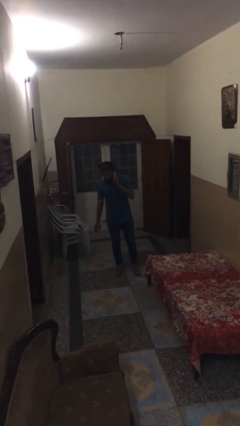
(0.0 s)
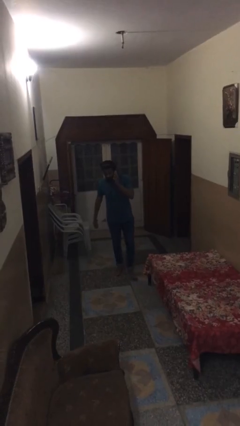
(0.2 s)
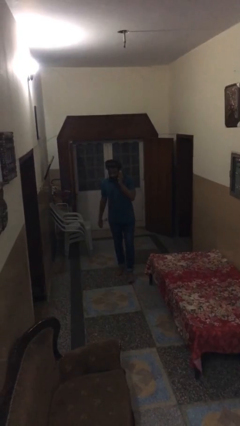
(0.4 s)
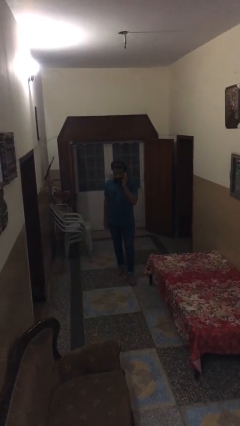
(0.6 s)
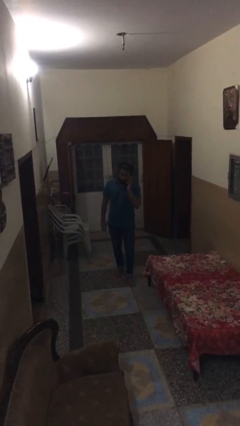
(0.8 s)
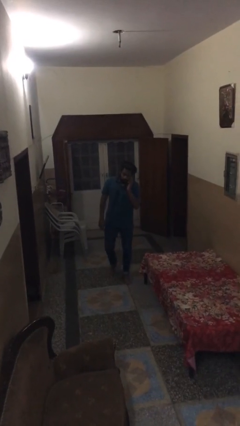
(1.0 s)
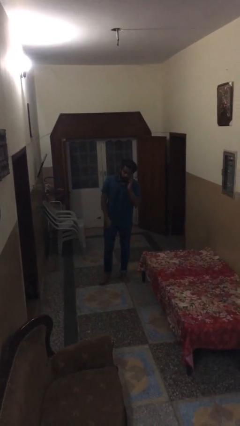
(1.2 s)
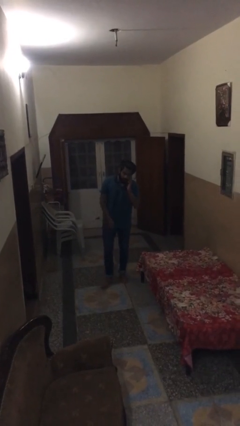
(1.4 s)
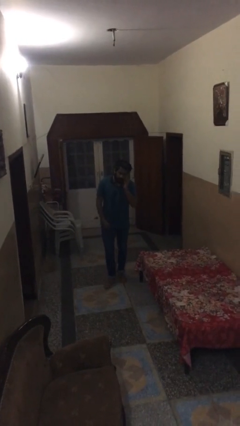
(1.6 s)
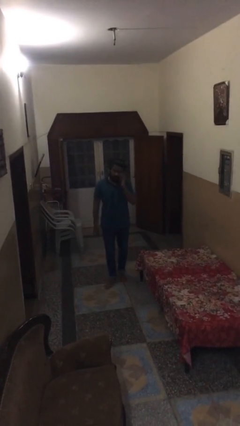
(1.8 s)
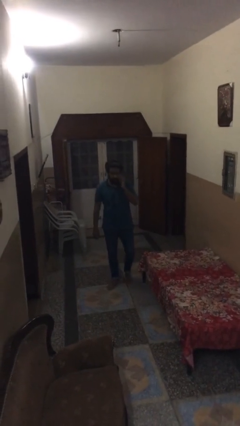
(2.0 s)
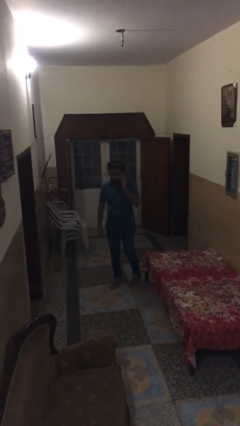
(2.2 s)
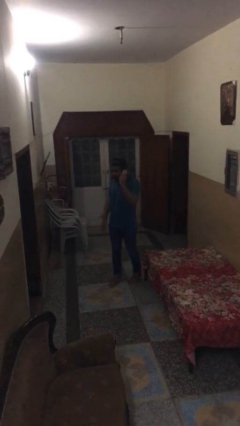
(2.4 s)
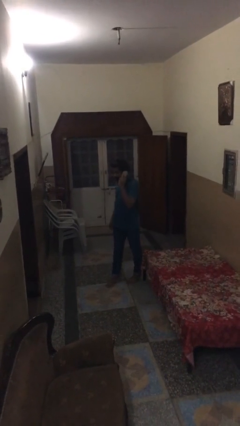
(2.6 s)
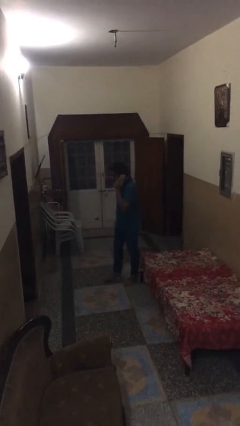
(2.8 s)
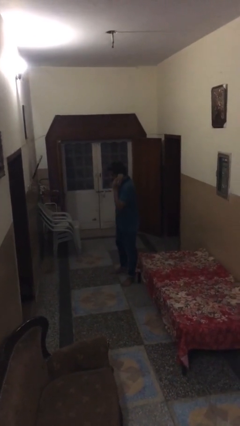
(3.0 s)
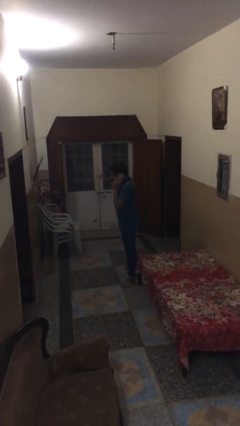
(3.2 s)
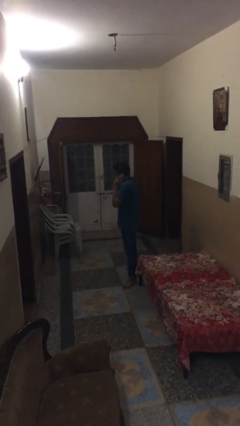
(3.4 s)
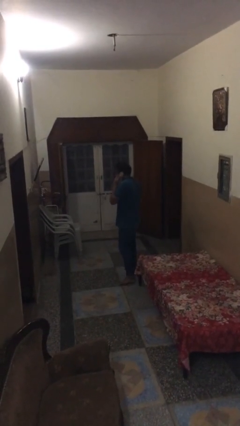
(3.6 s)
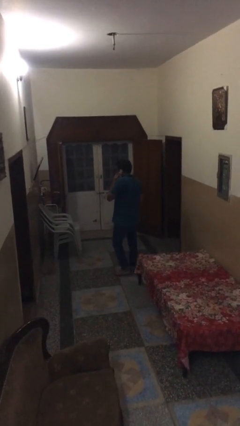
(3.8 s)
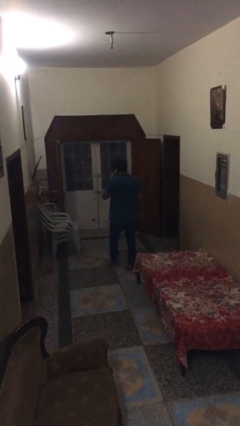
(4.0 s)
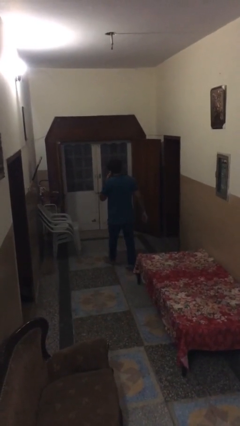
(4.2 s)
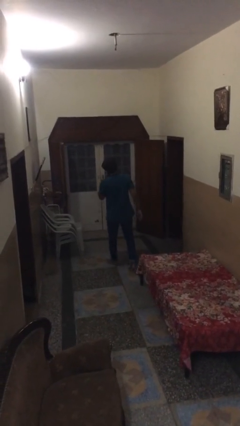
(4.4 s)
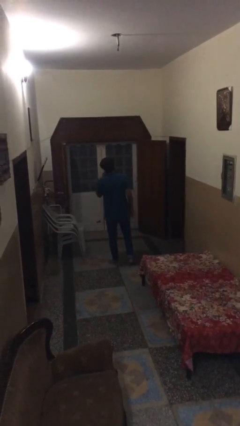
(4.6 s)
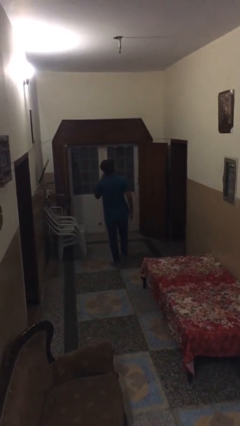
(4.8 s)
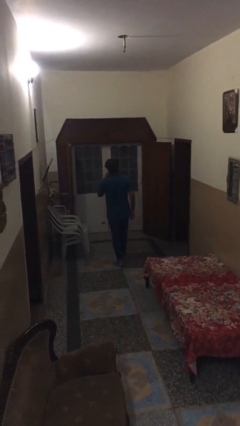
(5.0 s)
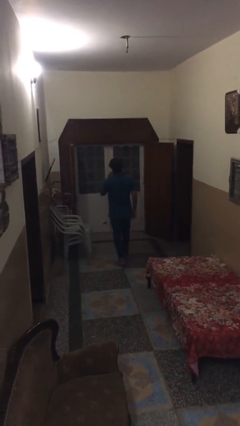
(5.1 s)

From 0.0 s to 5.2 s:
person talks on phone

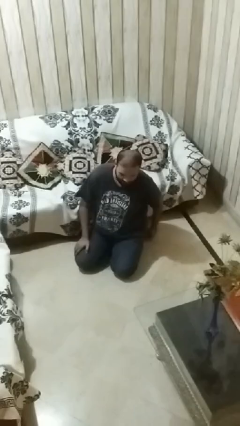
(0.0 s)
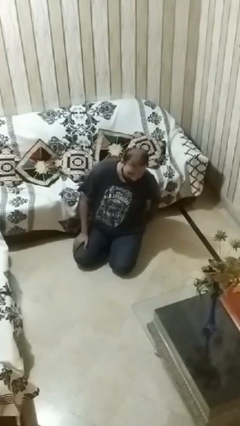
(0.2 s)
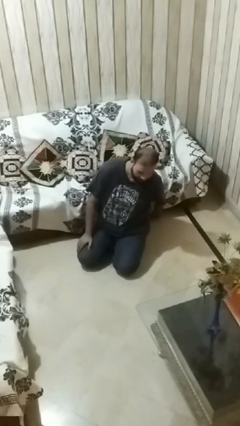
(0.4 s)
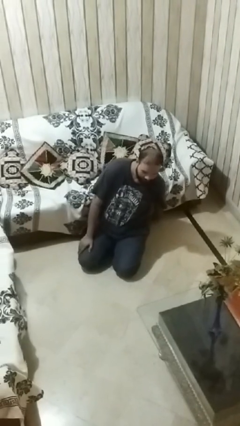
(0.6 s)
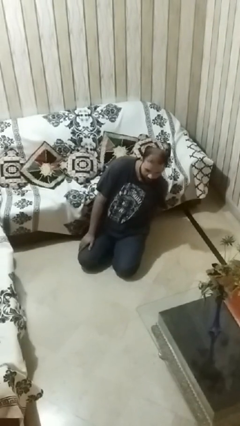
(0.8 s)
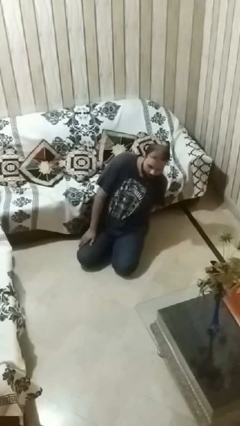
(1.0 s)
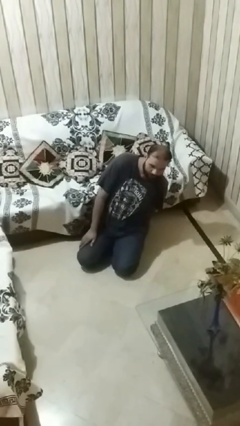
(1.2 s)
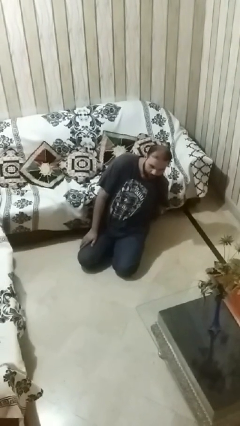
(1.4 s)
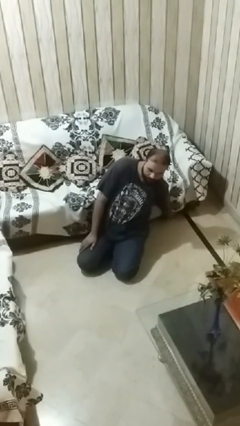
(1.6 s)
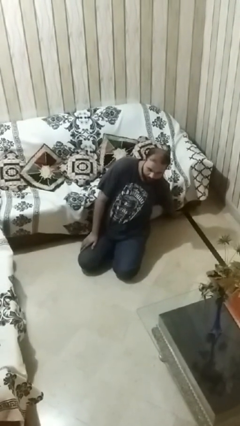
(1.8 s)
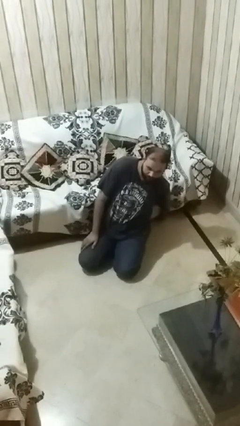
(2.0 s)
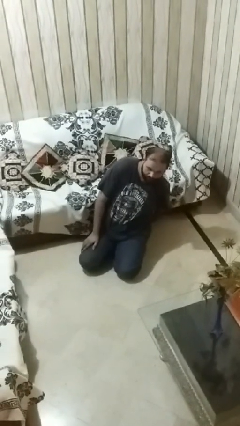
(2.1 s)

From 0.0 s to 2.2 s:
person searches under couch

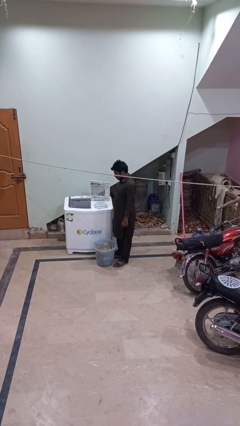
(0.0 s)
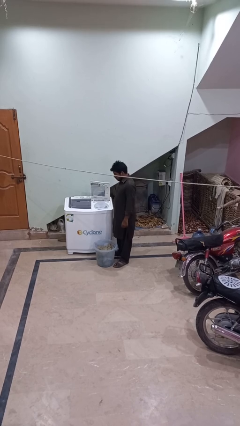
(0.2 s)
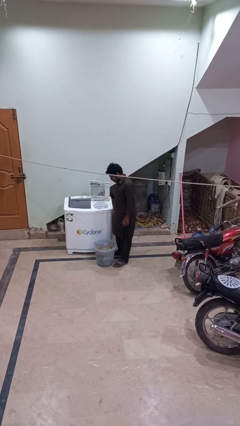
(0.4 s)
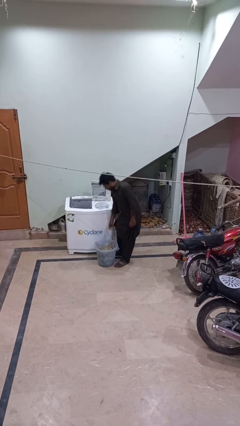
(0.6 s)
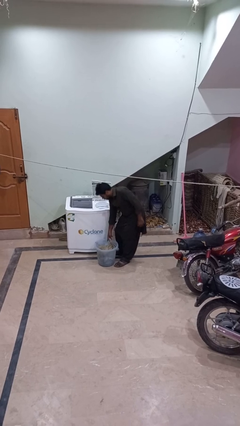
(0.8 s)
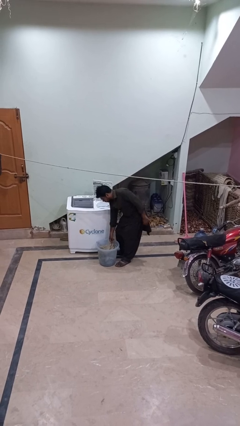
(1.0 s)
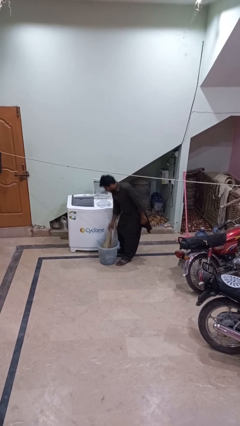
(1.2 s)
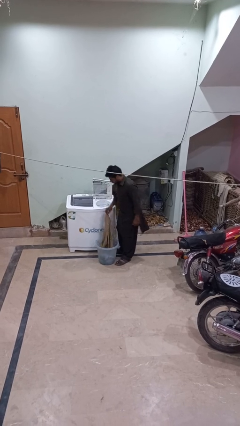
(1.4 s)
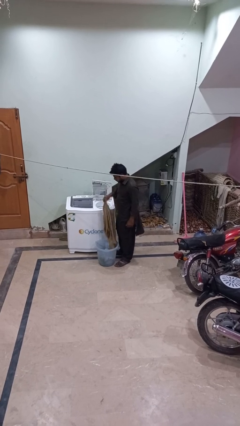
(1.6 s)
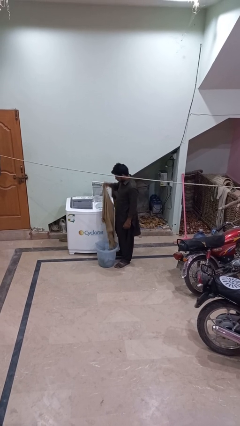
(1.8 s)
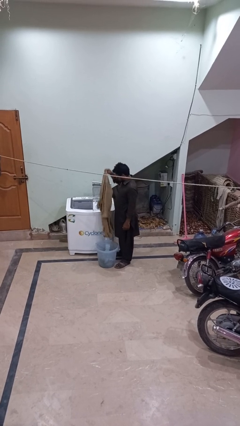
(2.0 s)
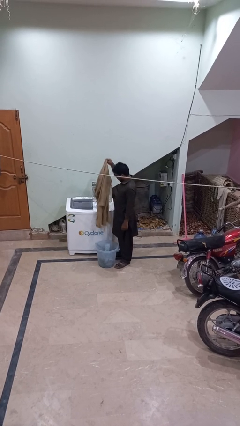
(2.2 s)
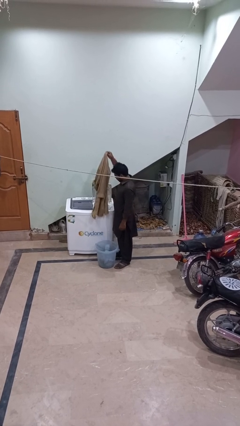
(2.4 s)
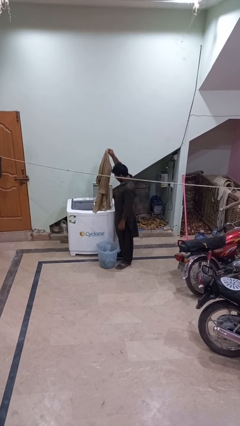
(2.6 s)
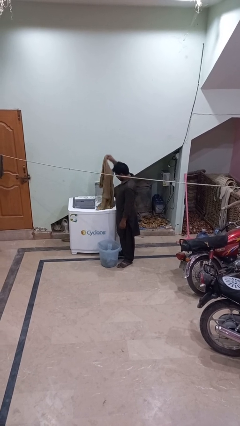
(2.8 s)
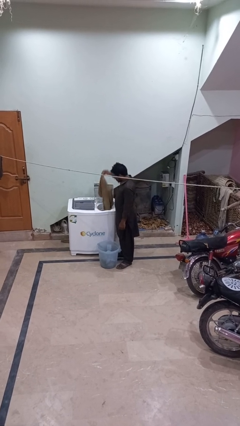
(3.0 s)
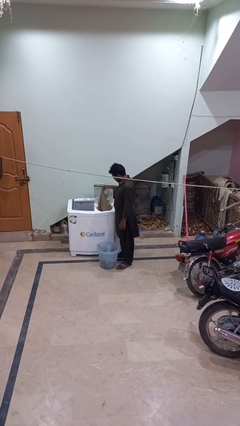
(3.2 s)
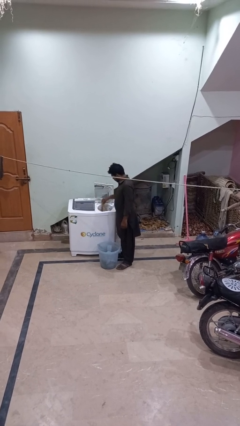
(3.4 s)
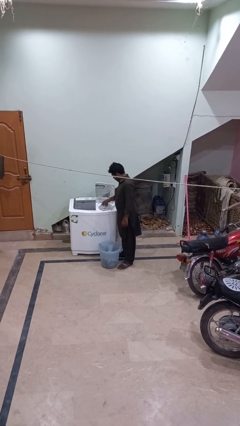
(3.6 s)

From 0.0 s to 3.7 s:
person loads dryer

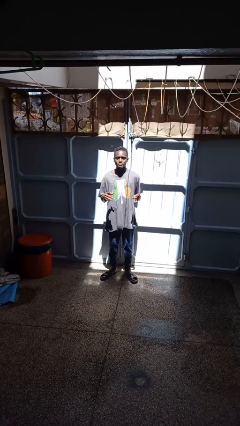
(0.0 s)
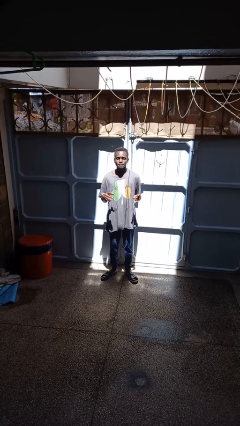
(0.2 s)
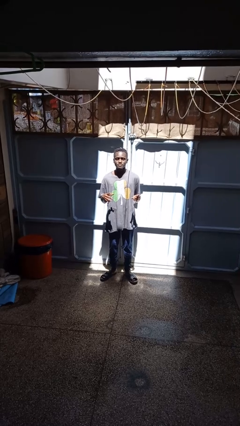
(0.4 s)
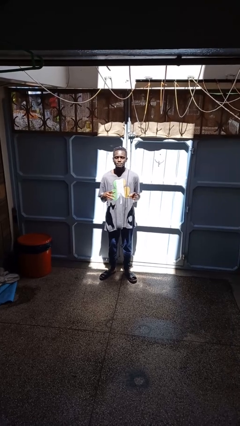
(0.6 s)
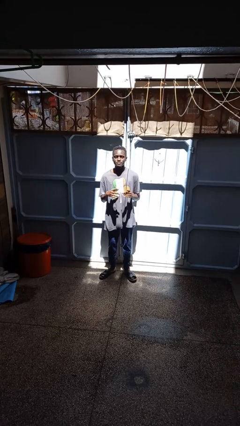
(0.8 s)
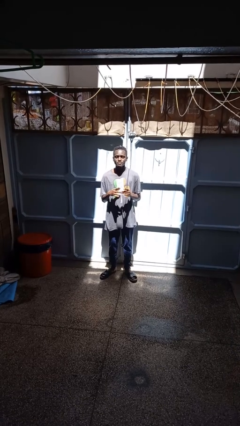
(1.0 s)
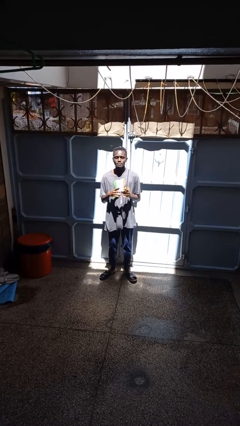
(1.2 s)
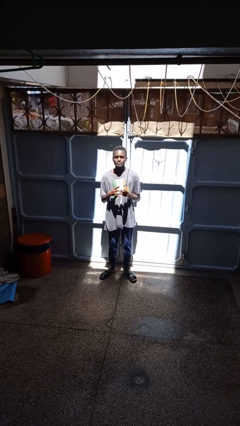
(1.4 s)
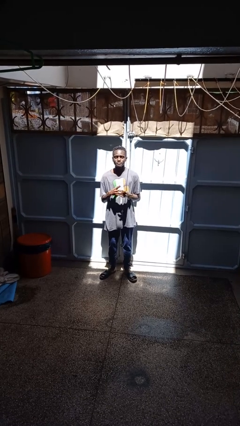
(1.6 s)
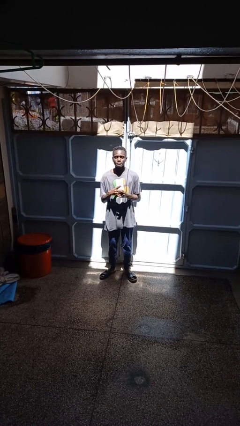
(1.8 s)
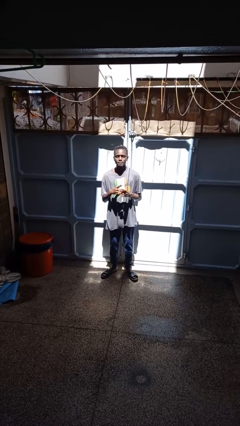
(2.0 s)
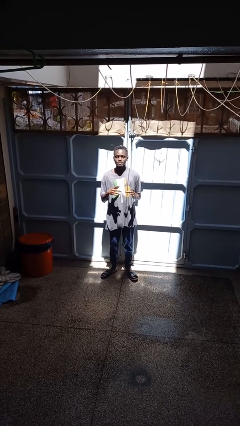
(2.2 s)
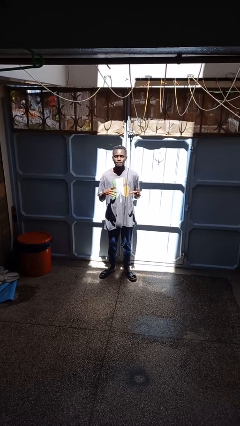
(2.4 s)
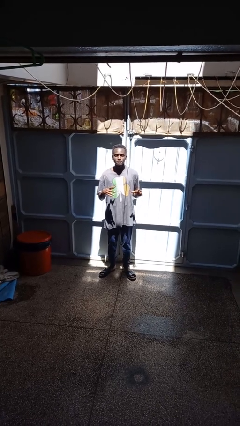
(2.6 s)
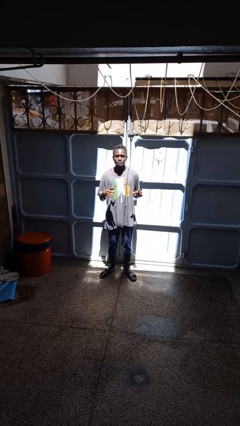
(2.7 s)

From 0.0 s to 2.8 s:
person puts on ring

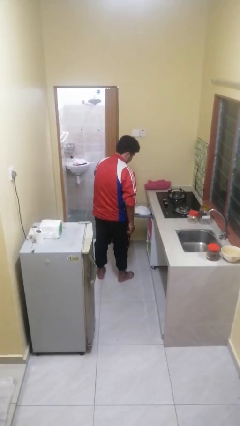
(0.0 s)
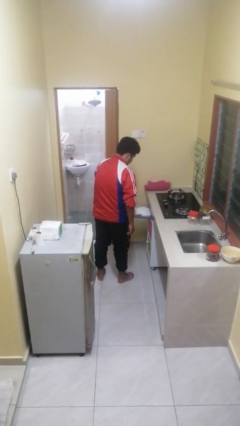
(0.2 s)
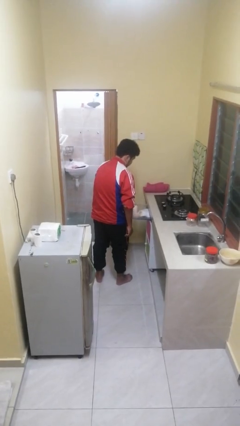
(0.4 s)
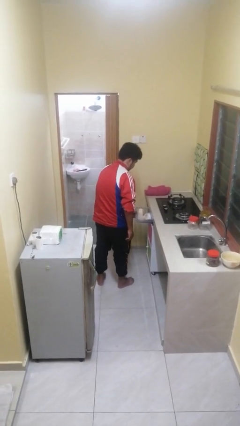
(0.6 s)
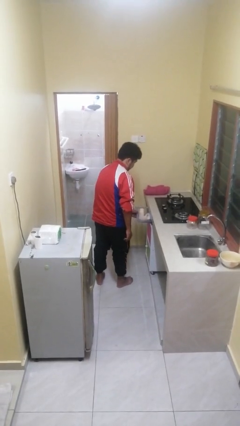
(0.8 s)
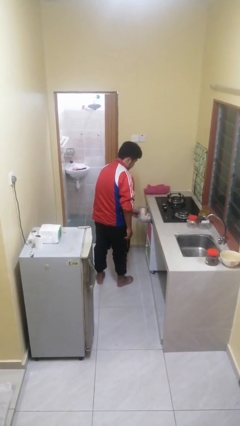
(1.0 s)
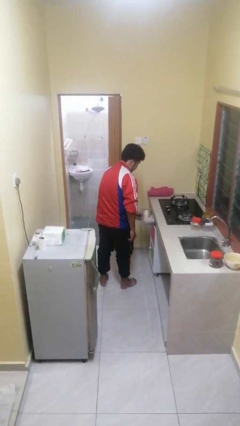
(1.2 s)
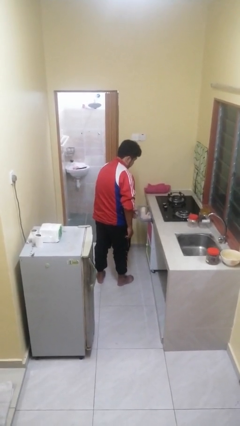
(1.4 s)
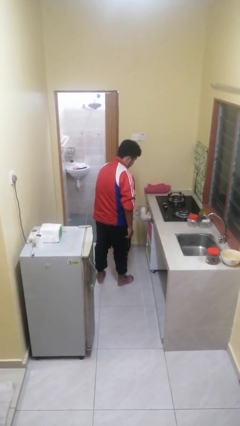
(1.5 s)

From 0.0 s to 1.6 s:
person closes kitchen drawer

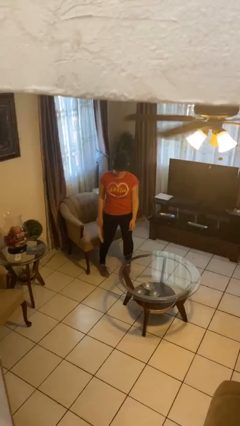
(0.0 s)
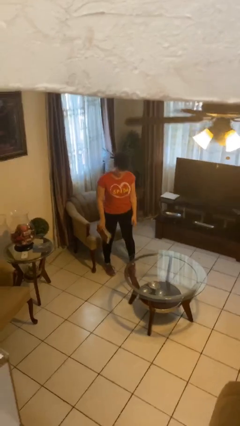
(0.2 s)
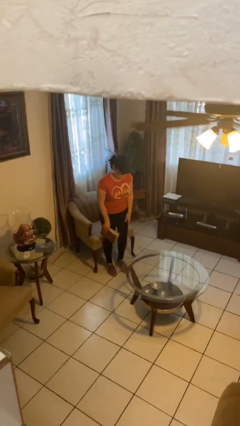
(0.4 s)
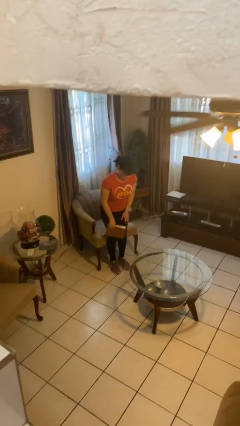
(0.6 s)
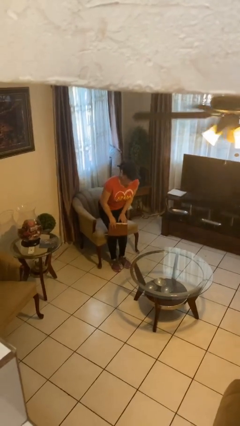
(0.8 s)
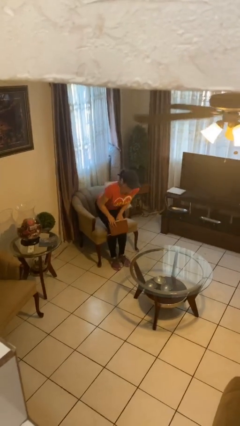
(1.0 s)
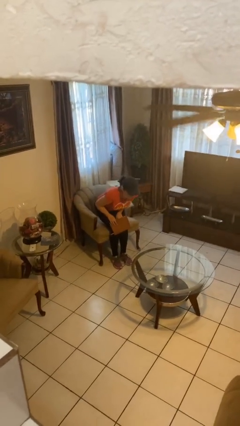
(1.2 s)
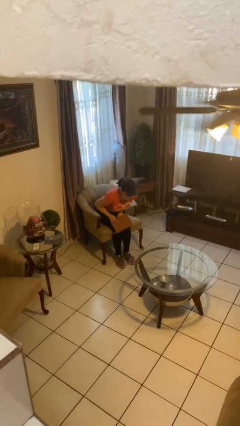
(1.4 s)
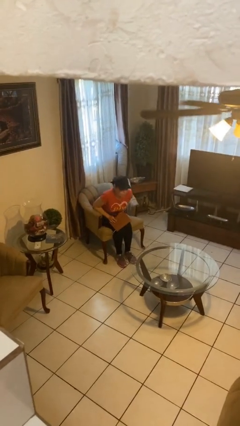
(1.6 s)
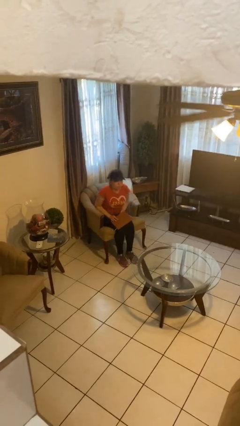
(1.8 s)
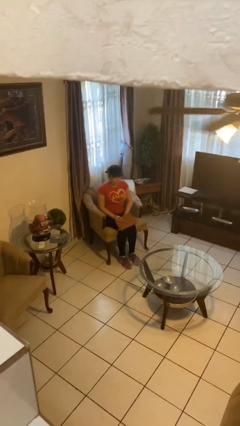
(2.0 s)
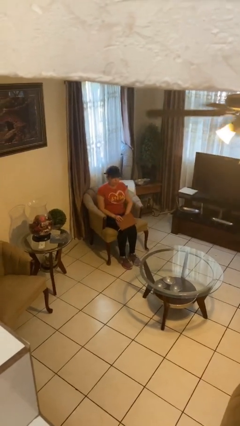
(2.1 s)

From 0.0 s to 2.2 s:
person sits down

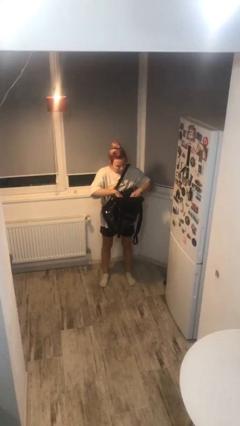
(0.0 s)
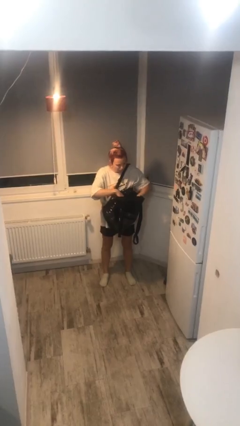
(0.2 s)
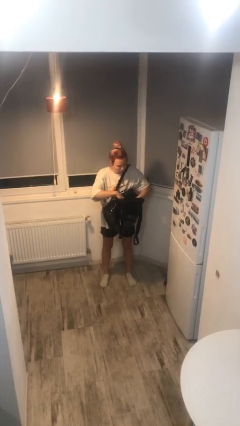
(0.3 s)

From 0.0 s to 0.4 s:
person puts object into backpack
